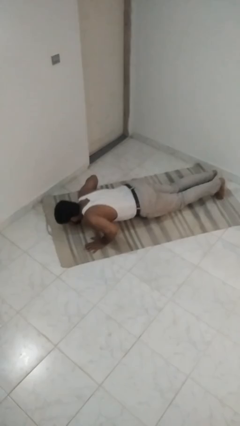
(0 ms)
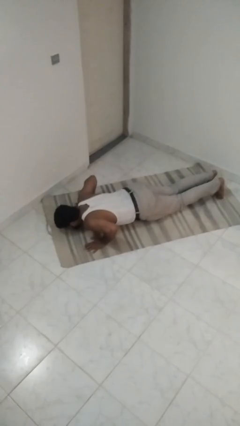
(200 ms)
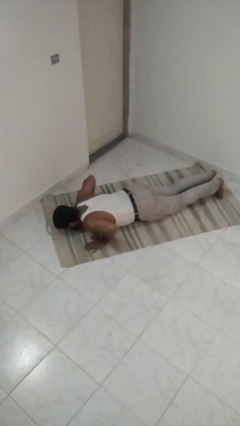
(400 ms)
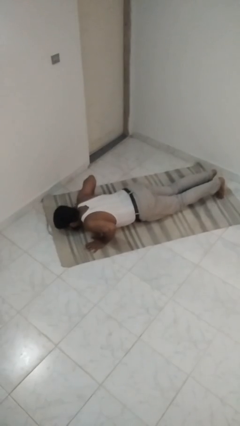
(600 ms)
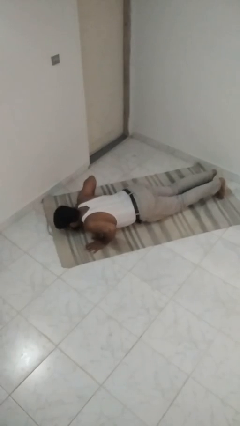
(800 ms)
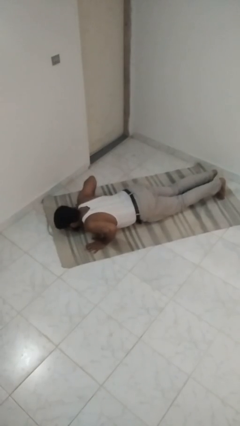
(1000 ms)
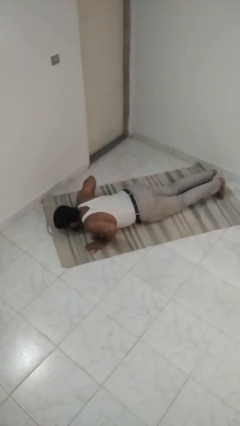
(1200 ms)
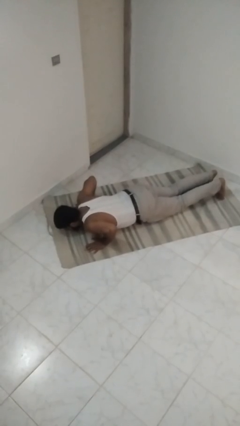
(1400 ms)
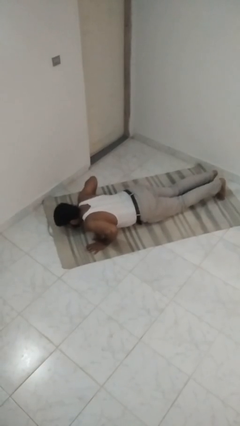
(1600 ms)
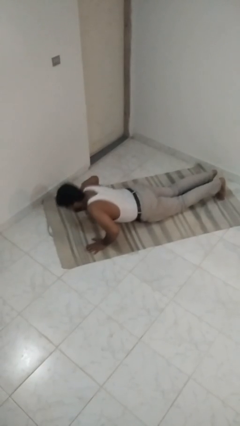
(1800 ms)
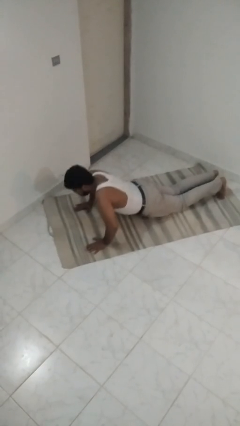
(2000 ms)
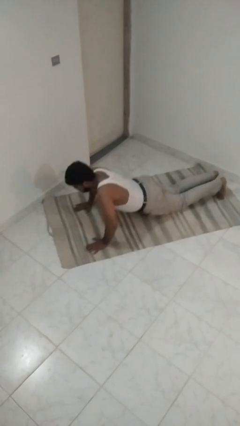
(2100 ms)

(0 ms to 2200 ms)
person exercises with pushup

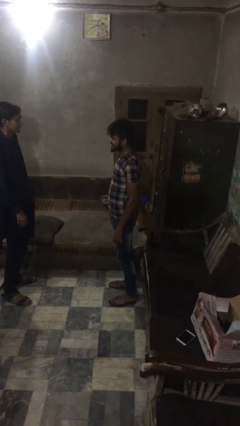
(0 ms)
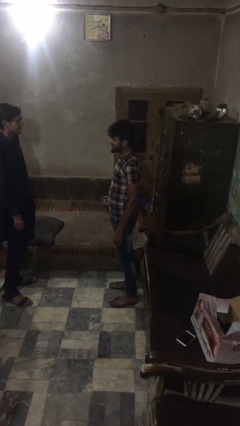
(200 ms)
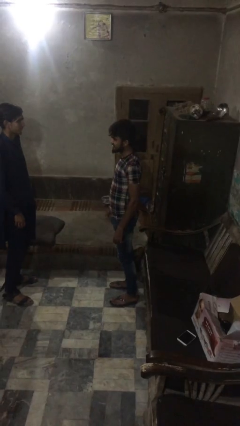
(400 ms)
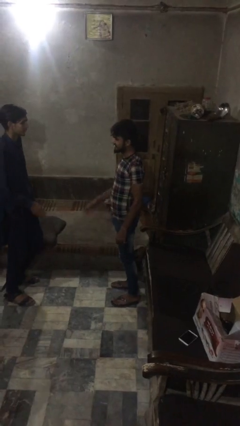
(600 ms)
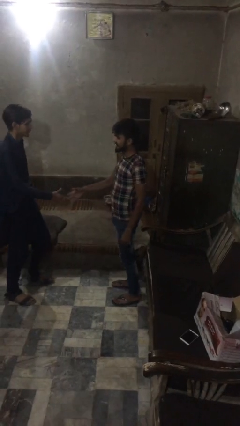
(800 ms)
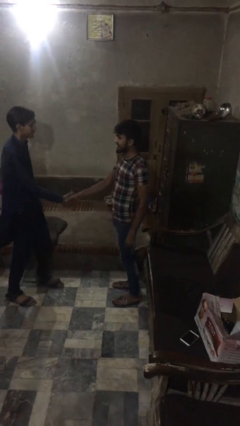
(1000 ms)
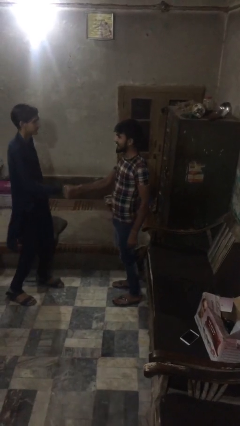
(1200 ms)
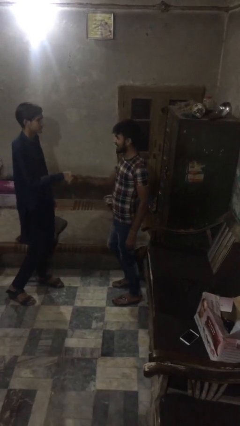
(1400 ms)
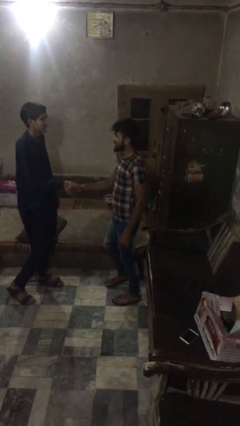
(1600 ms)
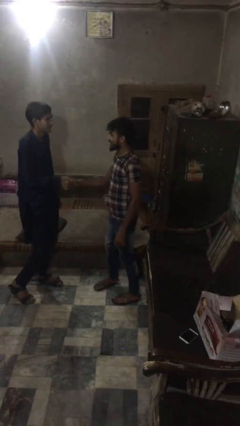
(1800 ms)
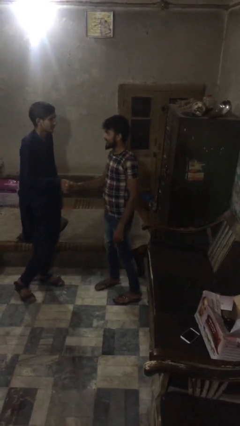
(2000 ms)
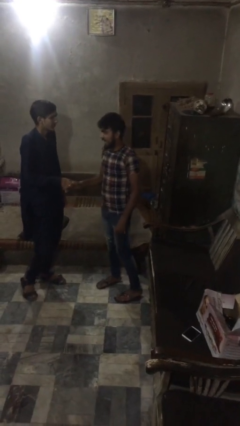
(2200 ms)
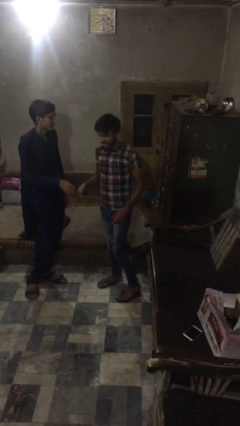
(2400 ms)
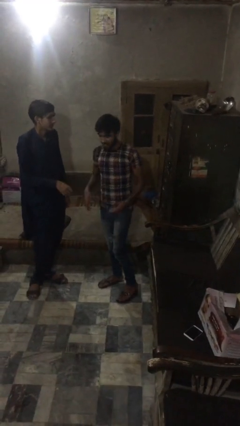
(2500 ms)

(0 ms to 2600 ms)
person shakes hand

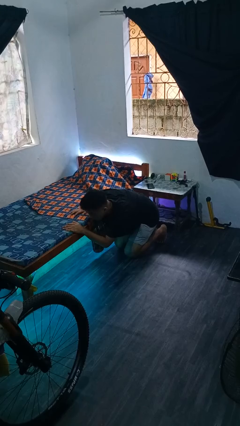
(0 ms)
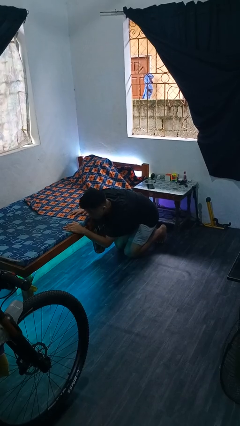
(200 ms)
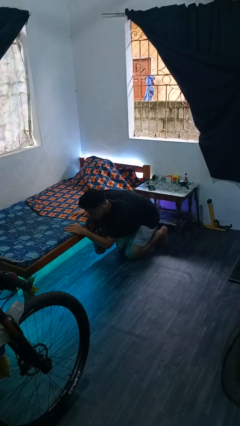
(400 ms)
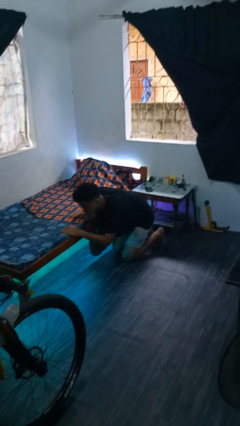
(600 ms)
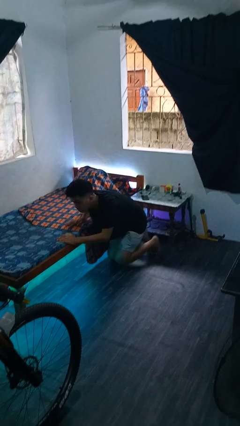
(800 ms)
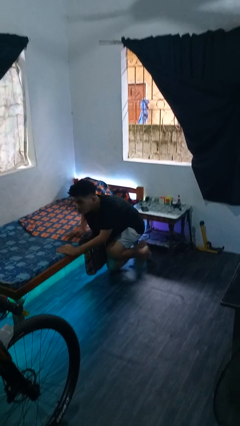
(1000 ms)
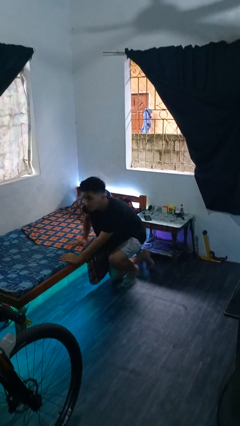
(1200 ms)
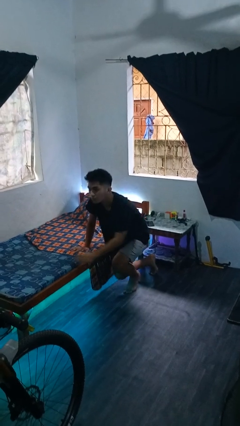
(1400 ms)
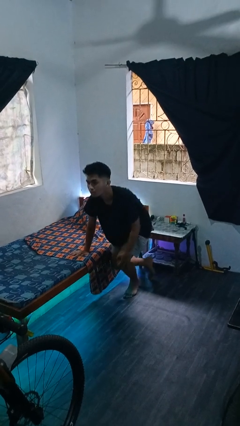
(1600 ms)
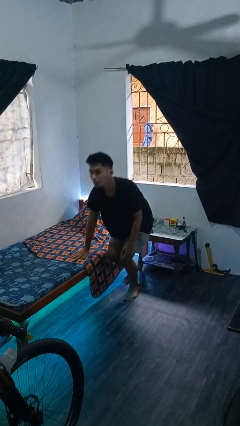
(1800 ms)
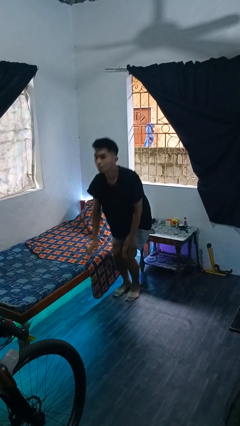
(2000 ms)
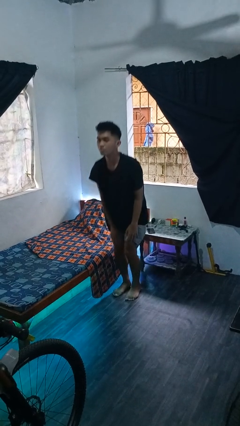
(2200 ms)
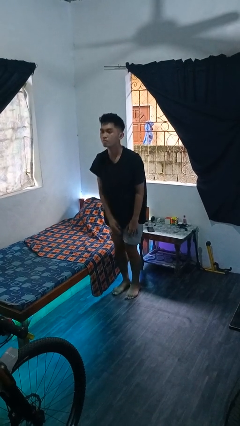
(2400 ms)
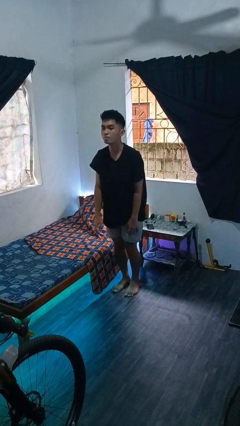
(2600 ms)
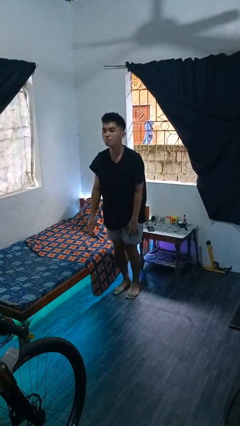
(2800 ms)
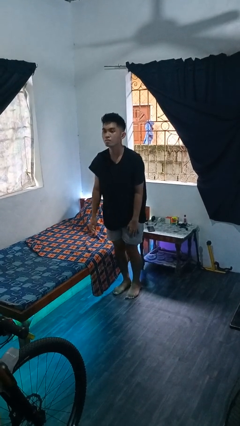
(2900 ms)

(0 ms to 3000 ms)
person stands up from floor

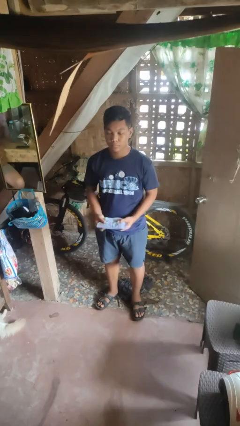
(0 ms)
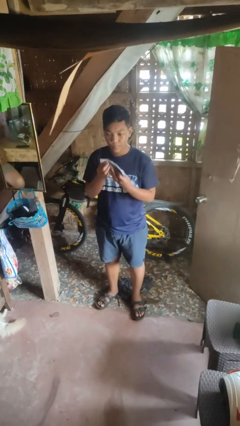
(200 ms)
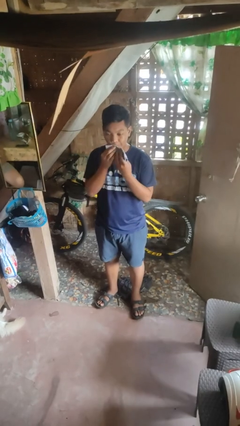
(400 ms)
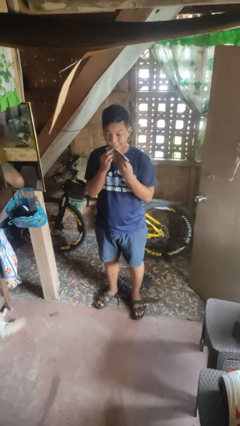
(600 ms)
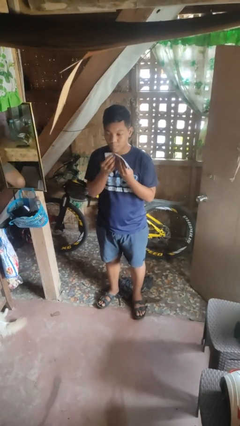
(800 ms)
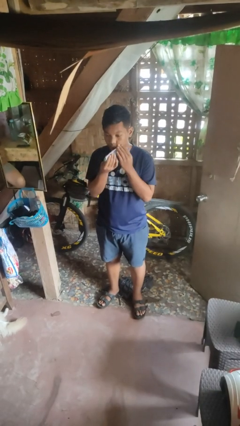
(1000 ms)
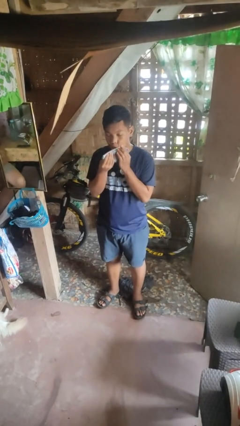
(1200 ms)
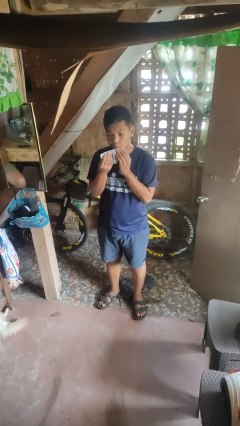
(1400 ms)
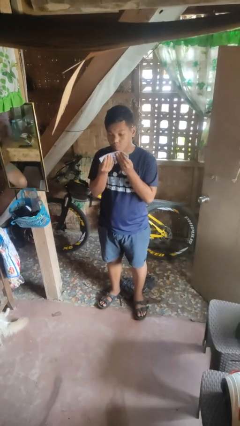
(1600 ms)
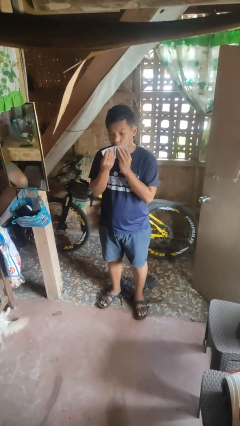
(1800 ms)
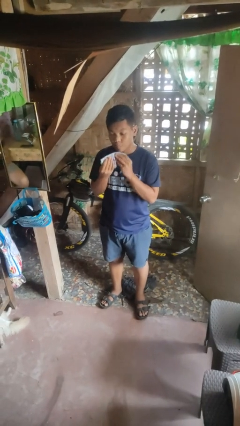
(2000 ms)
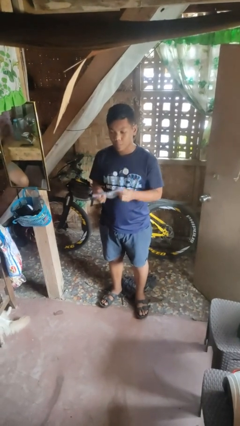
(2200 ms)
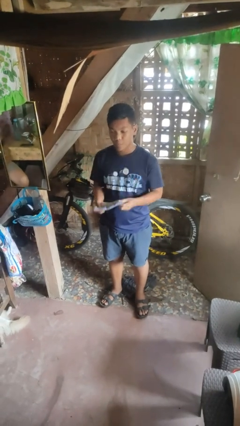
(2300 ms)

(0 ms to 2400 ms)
person wipes mouth with napkin

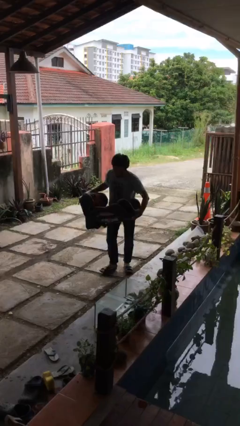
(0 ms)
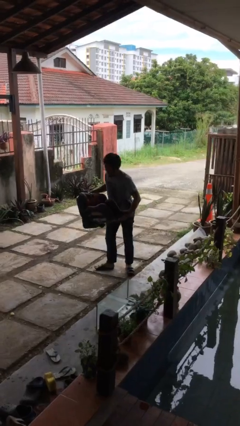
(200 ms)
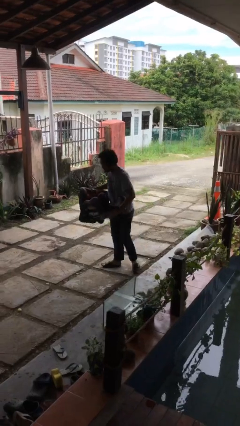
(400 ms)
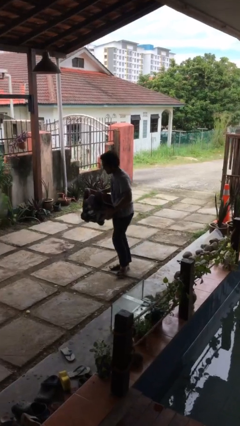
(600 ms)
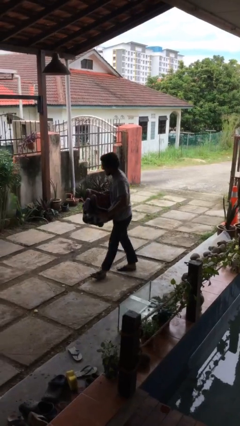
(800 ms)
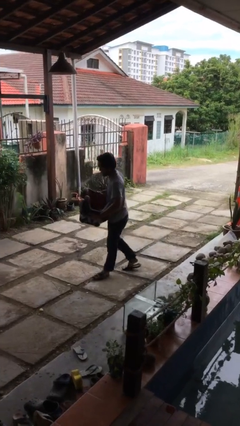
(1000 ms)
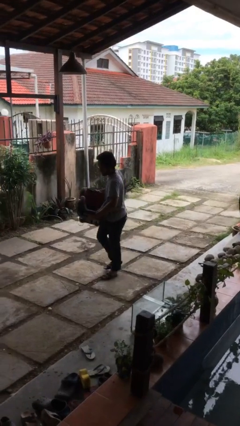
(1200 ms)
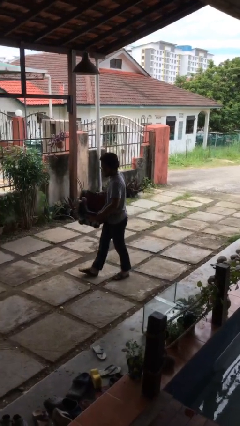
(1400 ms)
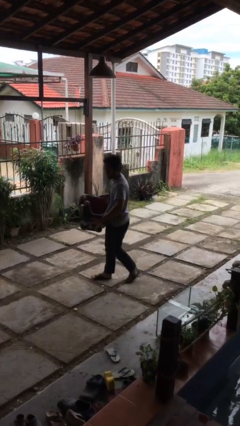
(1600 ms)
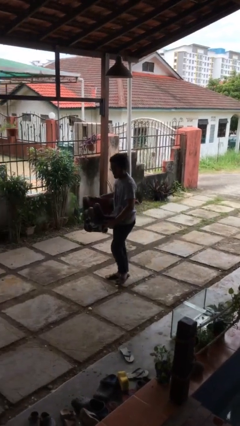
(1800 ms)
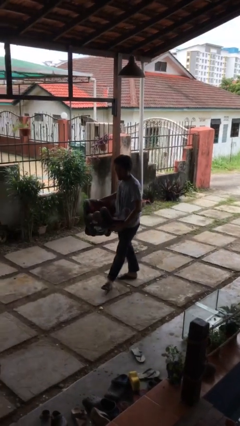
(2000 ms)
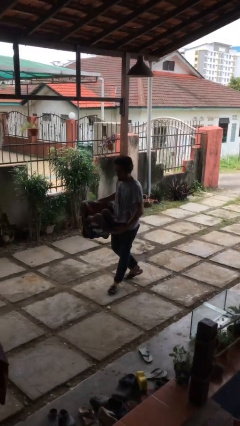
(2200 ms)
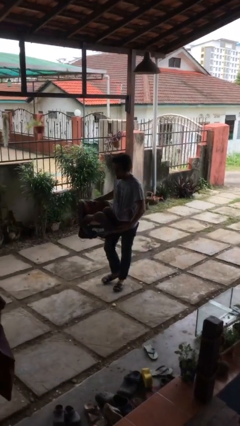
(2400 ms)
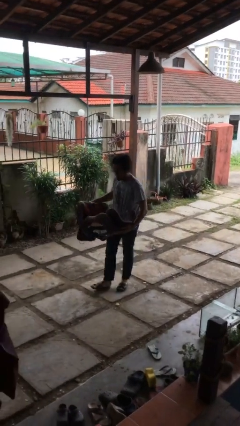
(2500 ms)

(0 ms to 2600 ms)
person carries heavy object

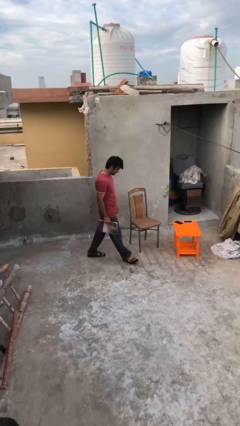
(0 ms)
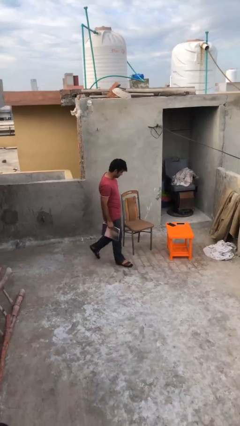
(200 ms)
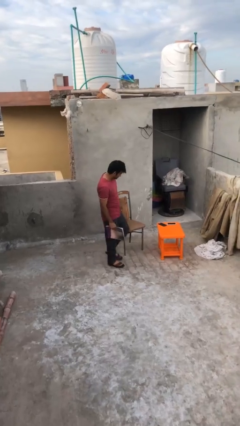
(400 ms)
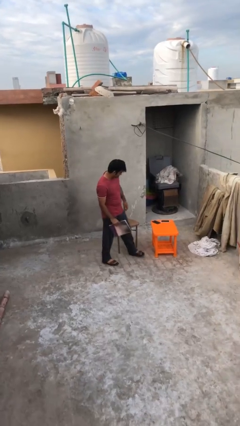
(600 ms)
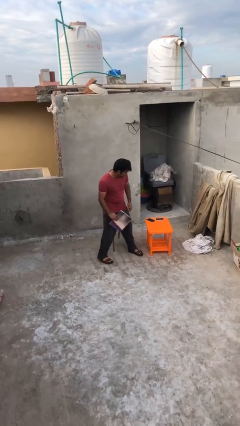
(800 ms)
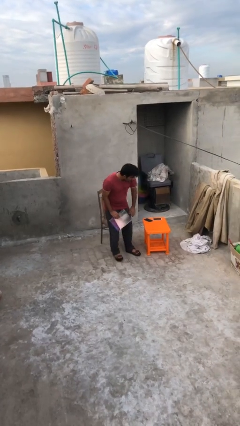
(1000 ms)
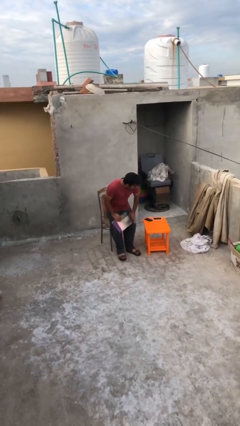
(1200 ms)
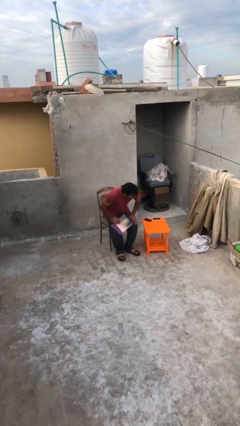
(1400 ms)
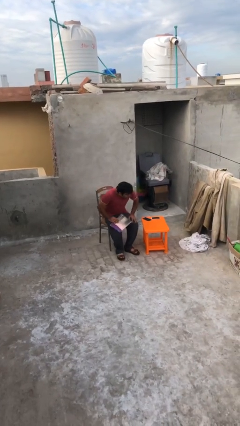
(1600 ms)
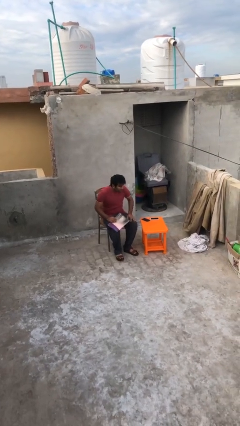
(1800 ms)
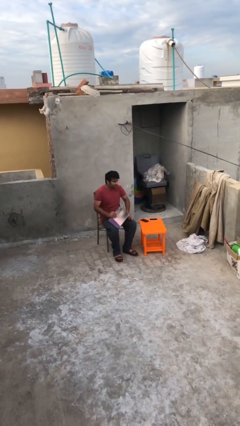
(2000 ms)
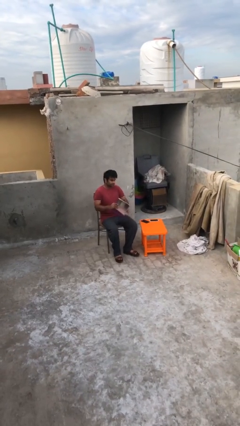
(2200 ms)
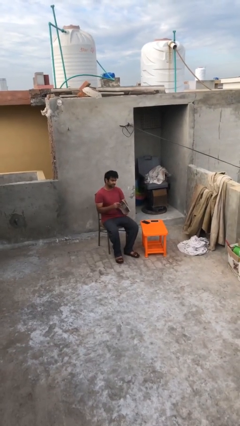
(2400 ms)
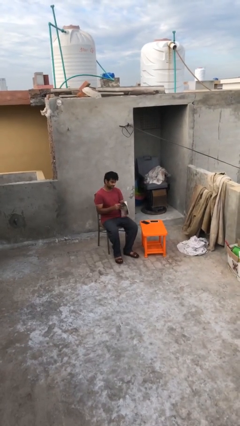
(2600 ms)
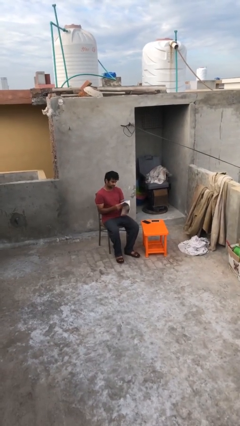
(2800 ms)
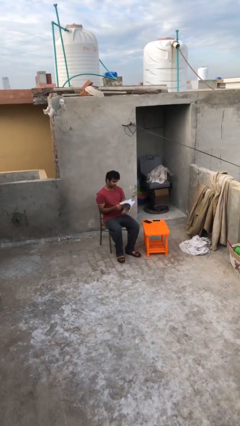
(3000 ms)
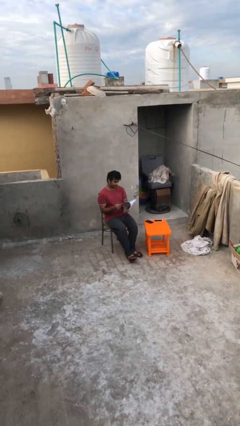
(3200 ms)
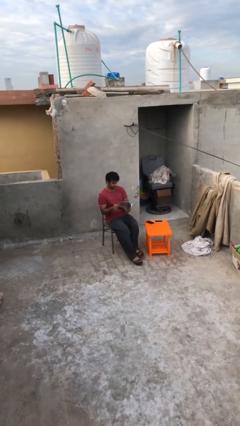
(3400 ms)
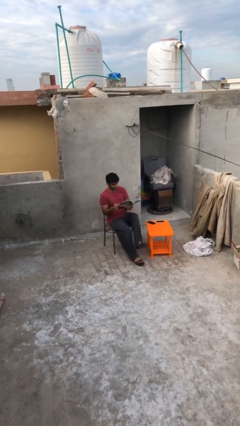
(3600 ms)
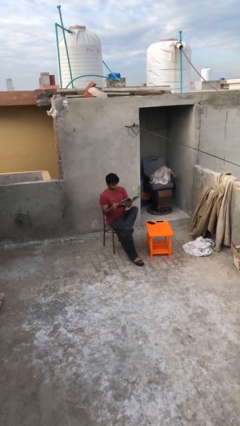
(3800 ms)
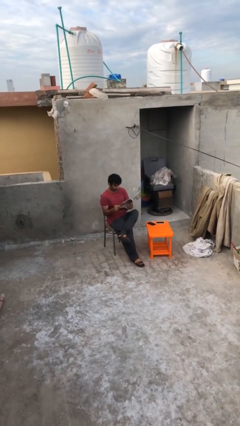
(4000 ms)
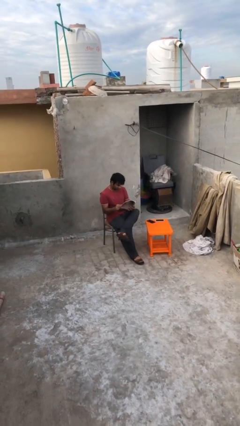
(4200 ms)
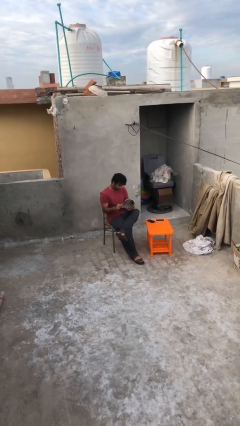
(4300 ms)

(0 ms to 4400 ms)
person sits down

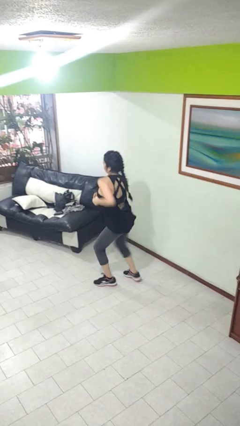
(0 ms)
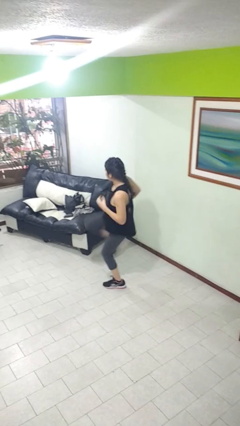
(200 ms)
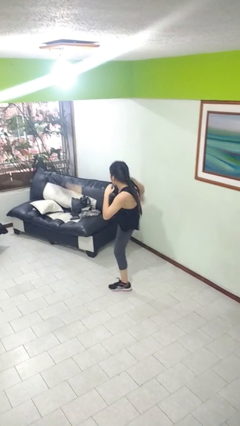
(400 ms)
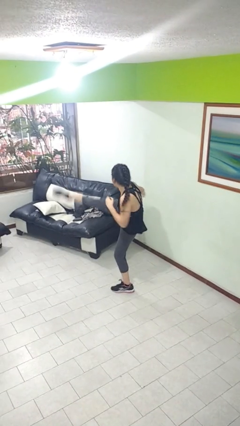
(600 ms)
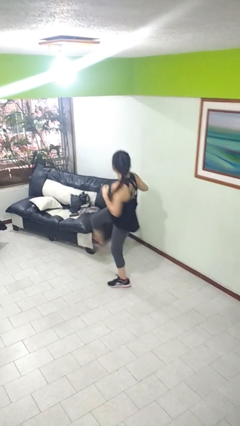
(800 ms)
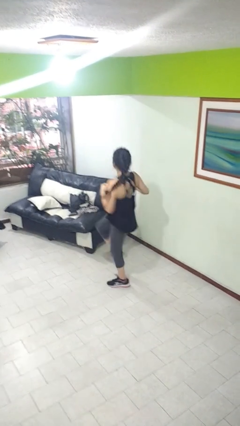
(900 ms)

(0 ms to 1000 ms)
person karate kicks
